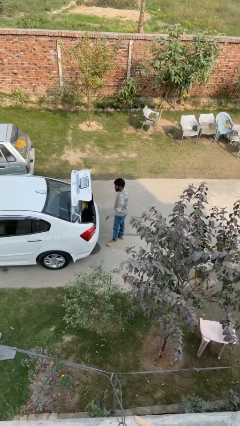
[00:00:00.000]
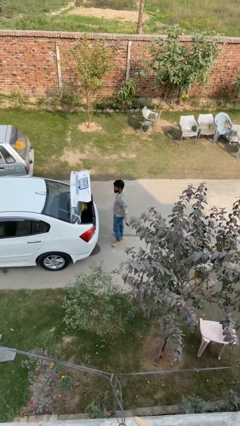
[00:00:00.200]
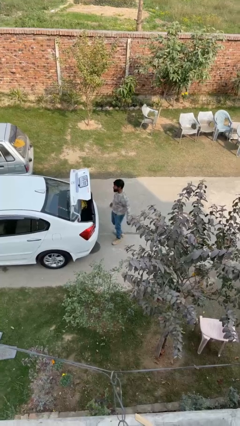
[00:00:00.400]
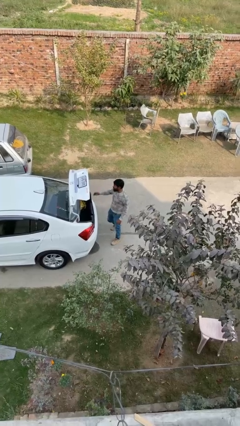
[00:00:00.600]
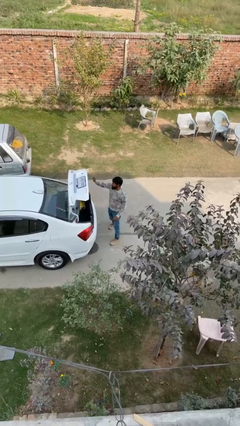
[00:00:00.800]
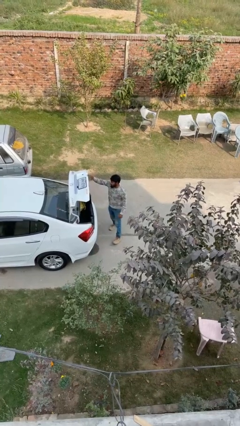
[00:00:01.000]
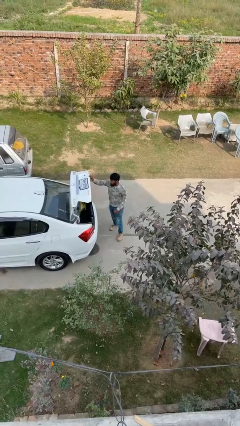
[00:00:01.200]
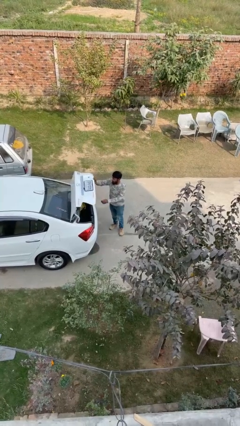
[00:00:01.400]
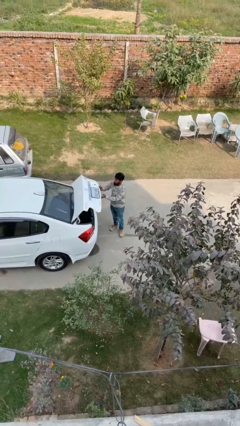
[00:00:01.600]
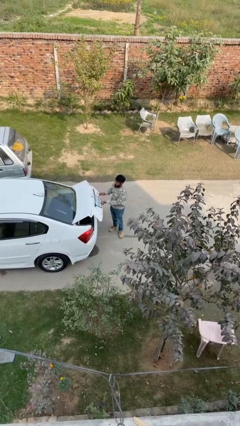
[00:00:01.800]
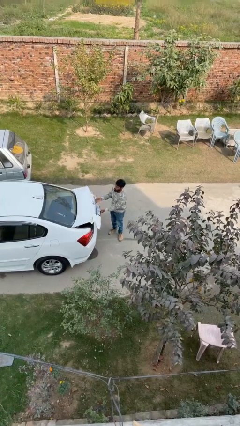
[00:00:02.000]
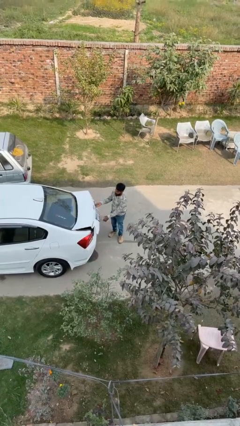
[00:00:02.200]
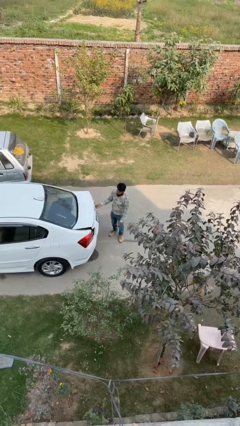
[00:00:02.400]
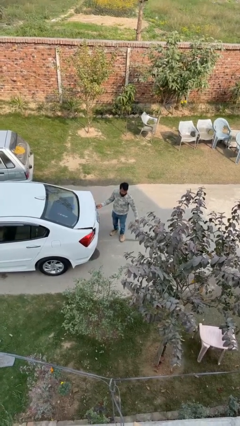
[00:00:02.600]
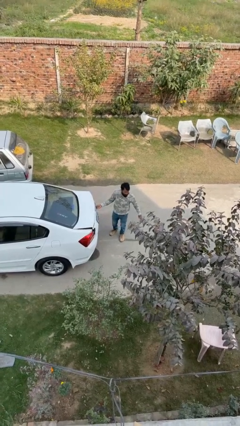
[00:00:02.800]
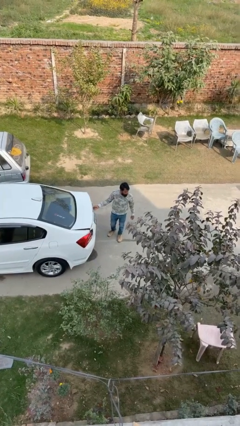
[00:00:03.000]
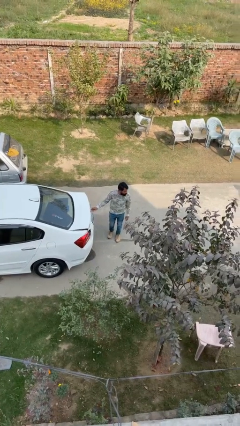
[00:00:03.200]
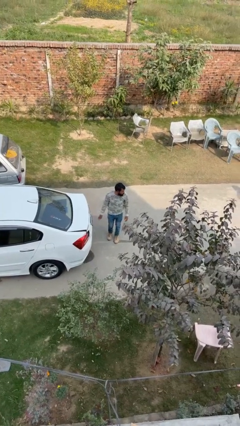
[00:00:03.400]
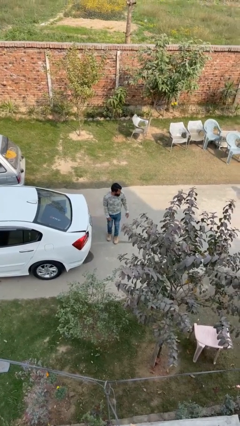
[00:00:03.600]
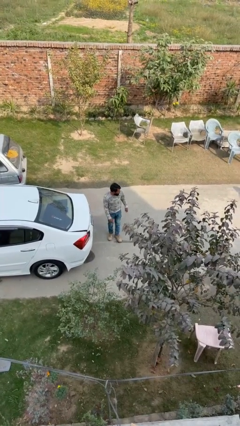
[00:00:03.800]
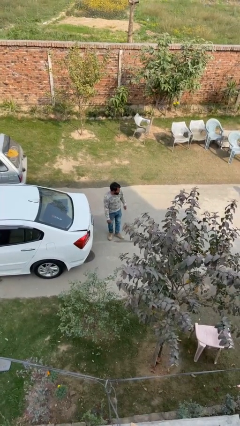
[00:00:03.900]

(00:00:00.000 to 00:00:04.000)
person closes car trunk

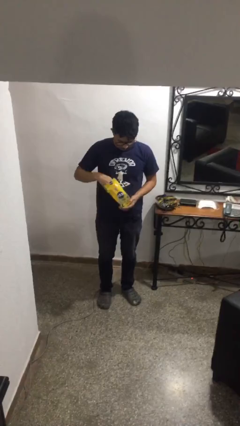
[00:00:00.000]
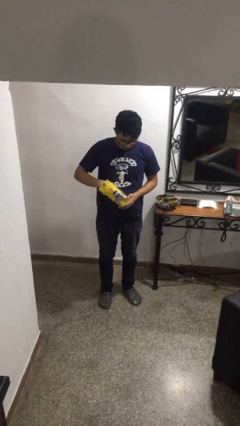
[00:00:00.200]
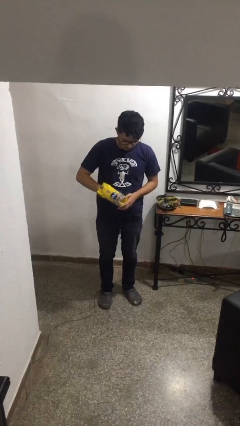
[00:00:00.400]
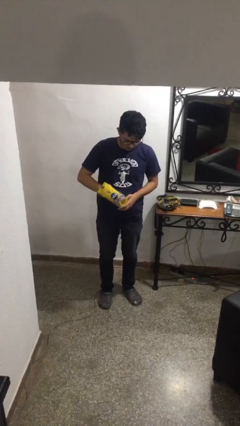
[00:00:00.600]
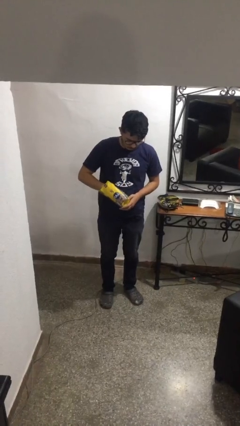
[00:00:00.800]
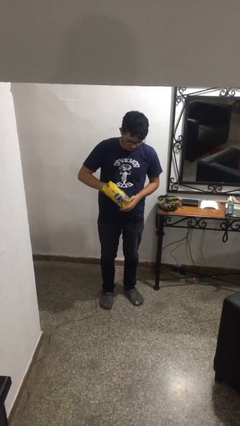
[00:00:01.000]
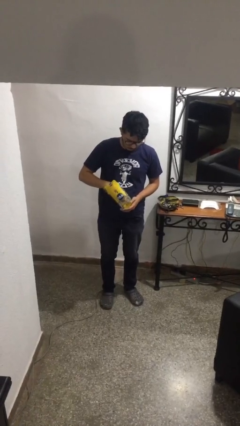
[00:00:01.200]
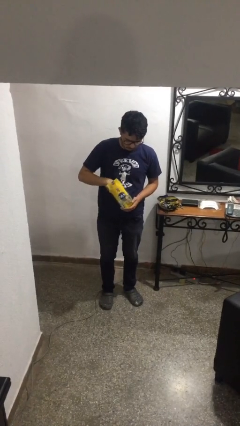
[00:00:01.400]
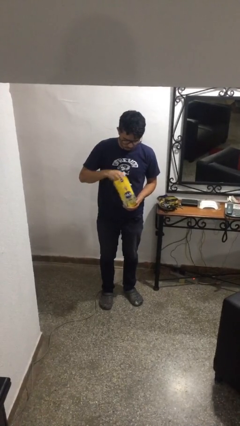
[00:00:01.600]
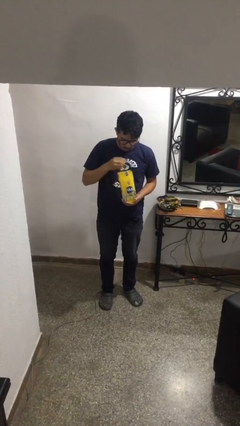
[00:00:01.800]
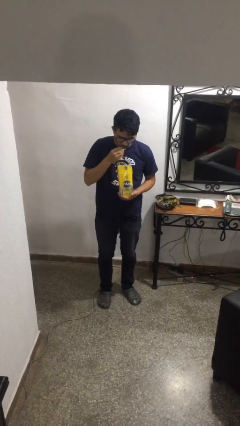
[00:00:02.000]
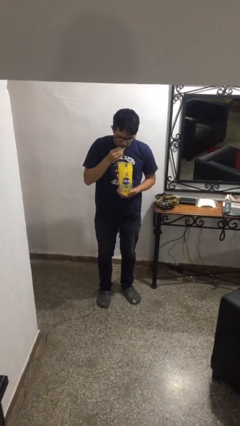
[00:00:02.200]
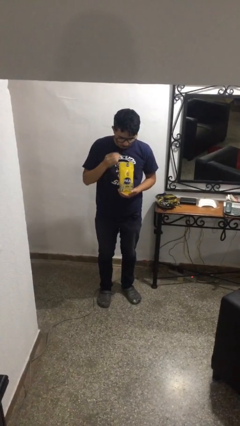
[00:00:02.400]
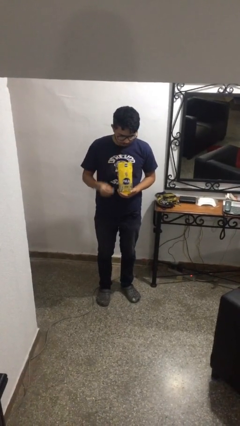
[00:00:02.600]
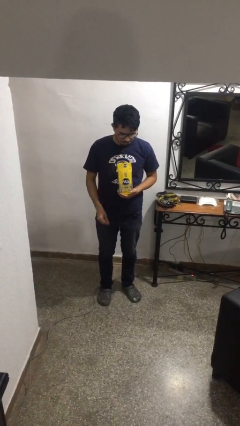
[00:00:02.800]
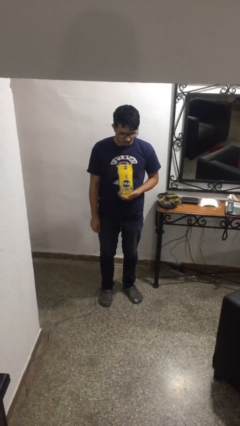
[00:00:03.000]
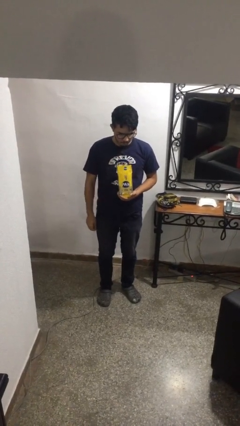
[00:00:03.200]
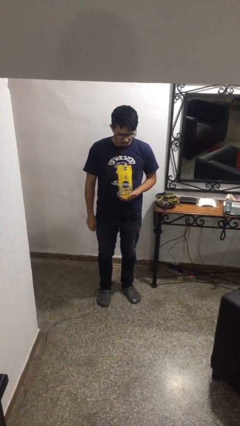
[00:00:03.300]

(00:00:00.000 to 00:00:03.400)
person eats snack from bag

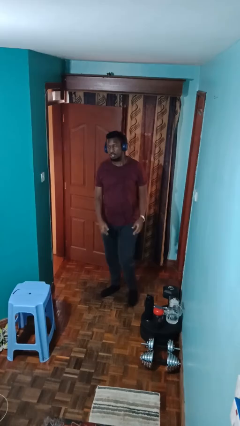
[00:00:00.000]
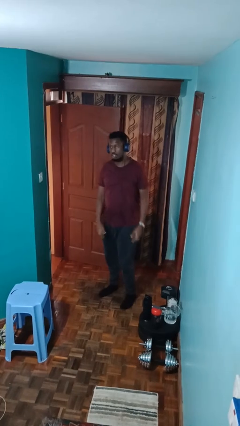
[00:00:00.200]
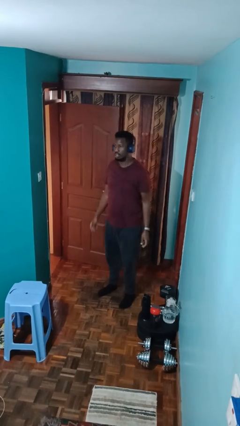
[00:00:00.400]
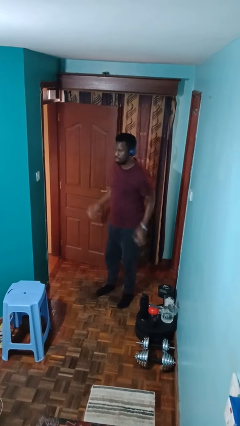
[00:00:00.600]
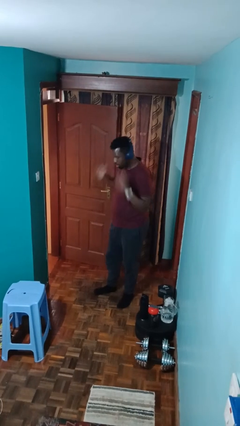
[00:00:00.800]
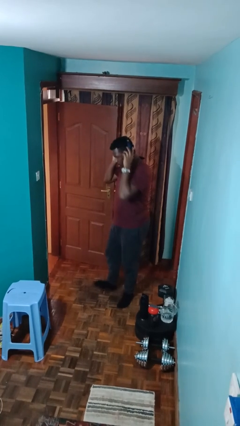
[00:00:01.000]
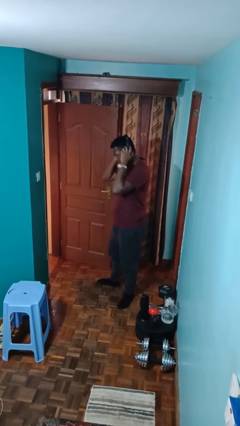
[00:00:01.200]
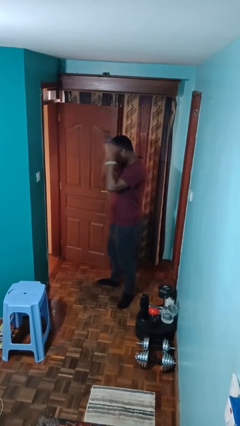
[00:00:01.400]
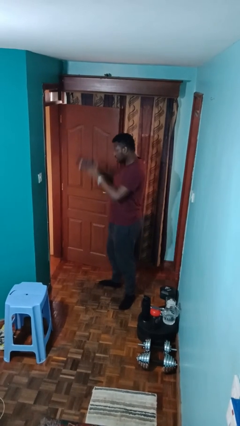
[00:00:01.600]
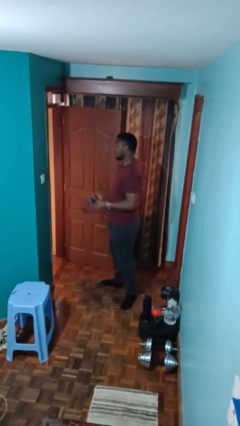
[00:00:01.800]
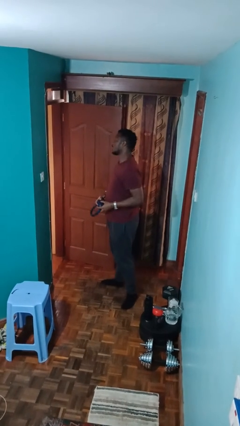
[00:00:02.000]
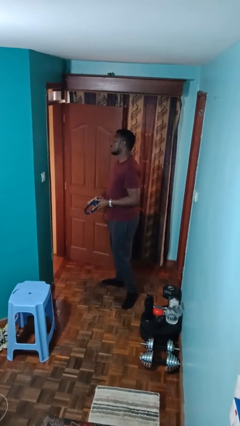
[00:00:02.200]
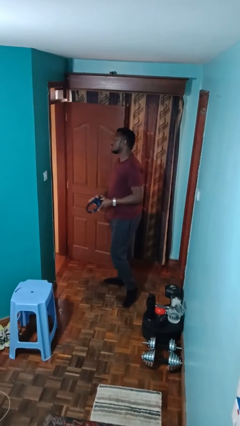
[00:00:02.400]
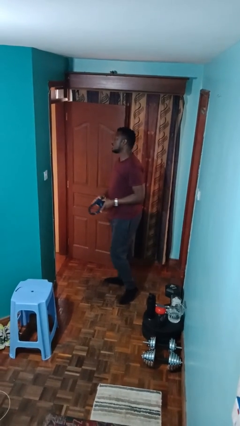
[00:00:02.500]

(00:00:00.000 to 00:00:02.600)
person takes off headphones

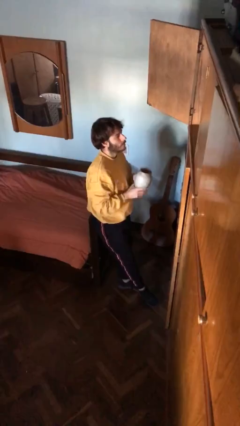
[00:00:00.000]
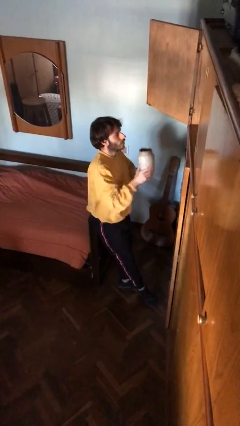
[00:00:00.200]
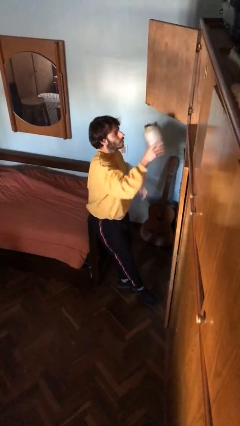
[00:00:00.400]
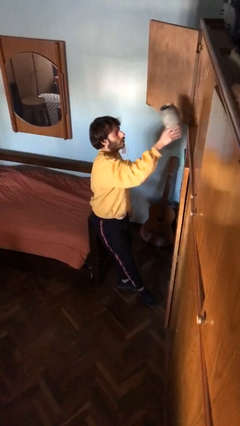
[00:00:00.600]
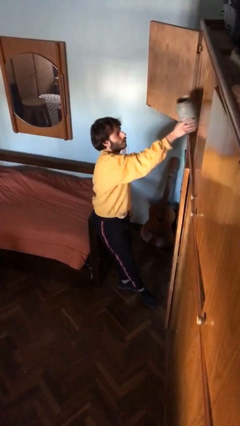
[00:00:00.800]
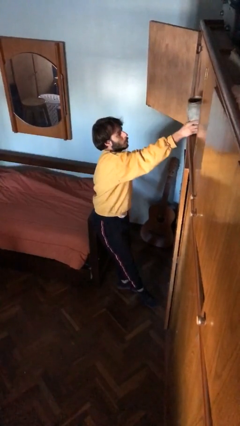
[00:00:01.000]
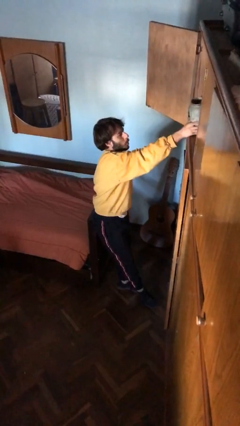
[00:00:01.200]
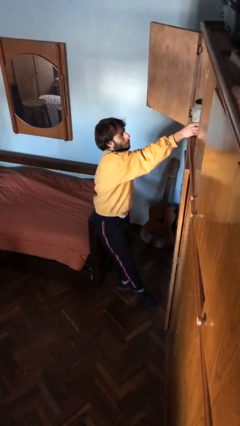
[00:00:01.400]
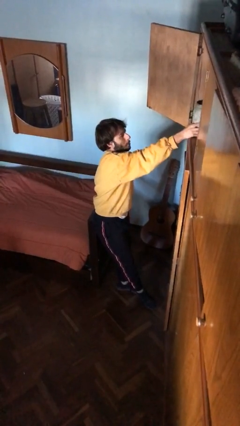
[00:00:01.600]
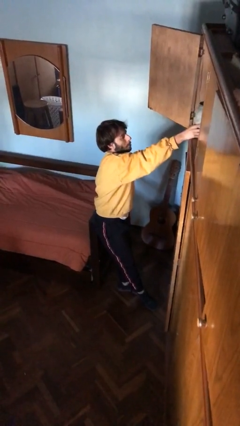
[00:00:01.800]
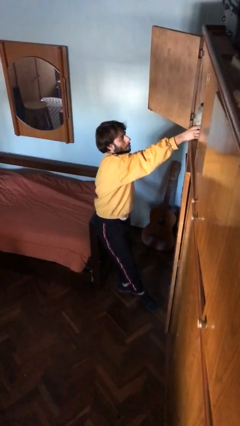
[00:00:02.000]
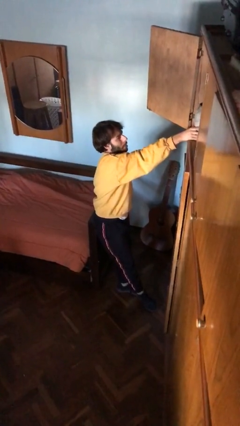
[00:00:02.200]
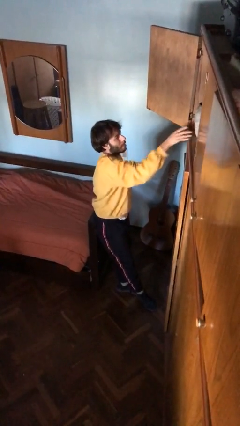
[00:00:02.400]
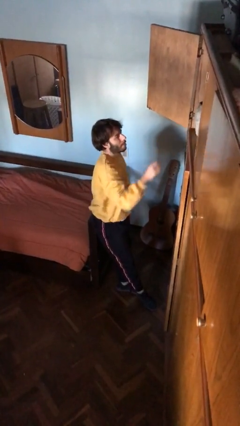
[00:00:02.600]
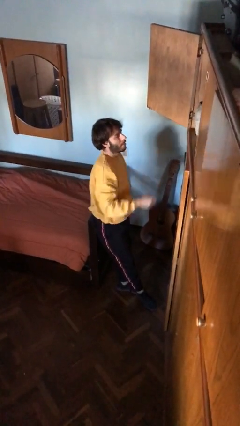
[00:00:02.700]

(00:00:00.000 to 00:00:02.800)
person puts down object into cabinet

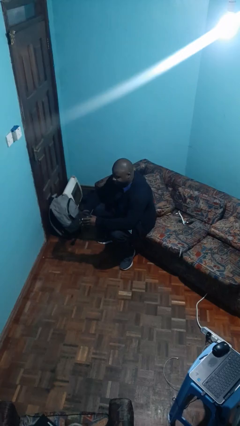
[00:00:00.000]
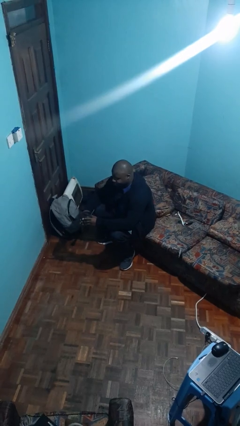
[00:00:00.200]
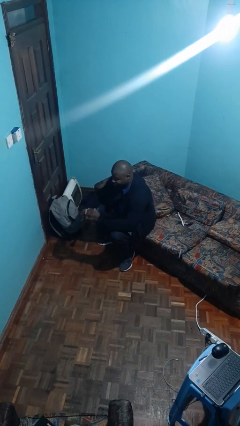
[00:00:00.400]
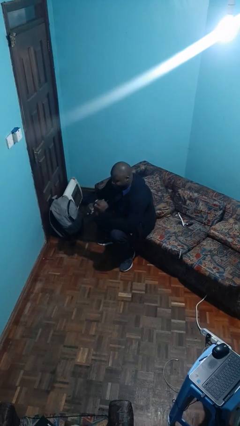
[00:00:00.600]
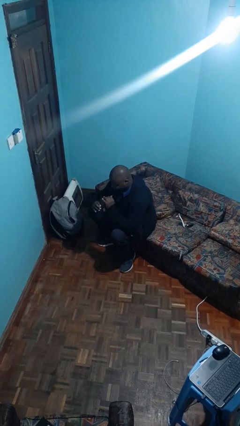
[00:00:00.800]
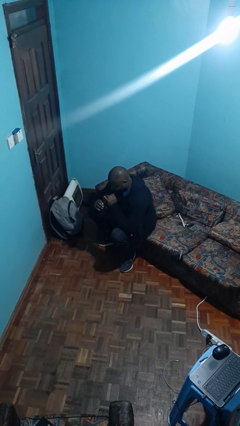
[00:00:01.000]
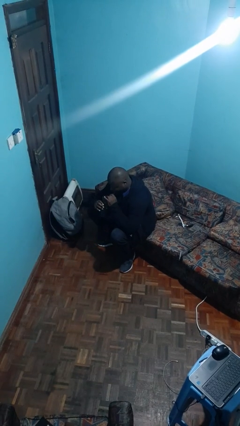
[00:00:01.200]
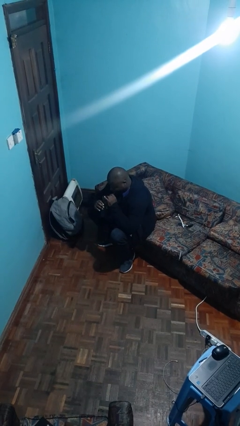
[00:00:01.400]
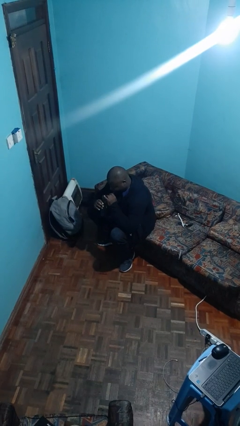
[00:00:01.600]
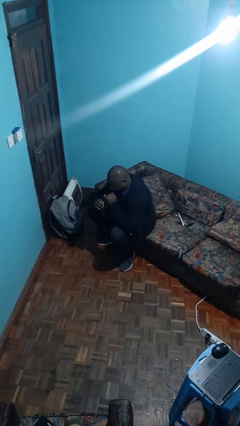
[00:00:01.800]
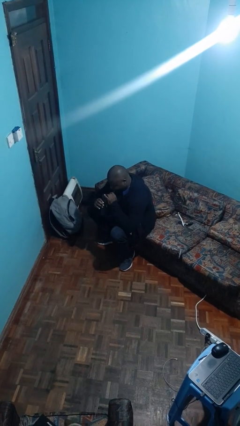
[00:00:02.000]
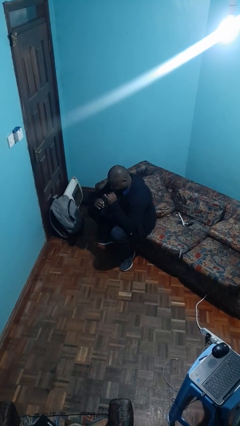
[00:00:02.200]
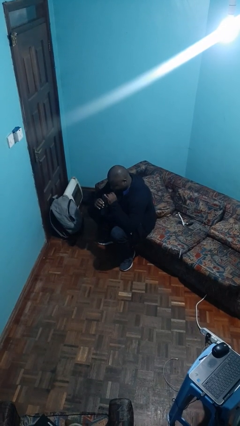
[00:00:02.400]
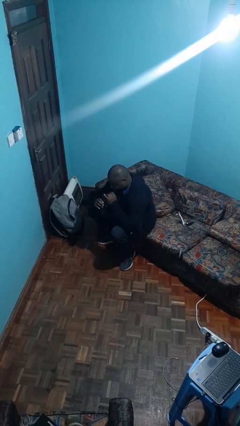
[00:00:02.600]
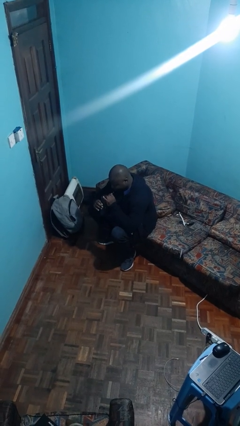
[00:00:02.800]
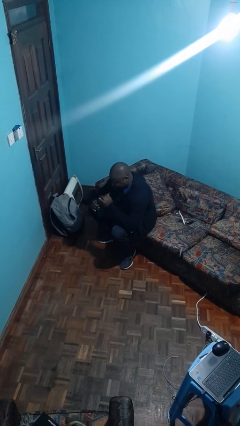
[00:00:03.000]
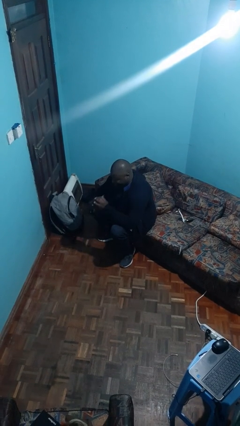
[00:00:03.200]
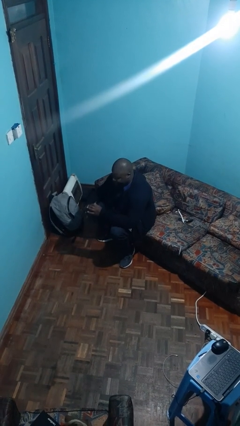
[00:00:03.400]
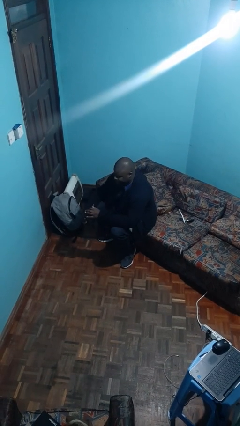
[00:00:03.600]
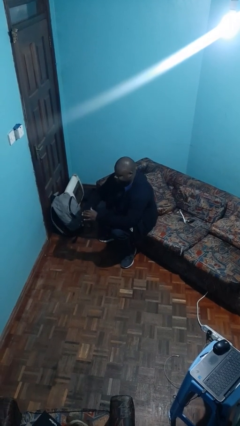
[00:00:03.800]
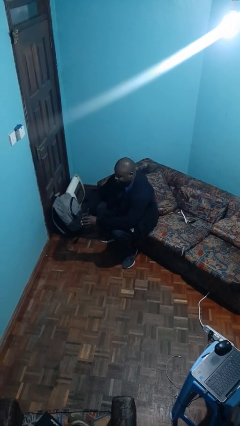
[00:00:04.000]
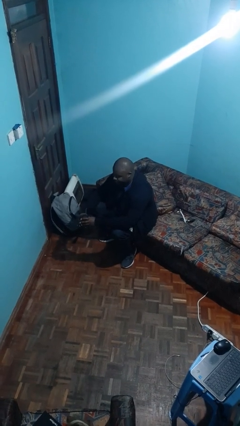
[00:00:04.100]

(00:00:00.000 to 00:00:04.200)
person drinks from straw
